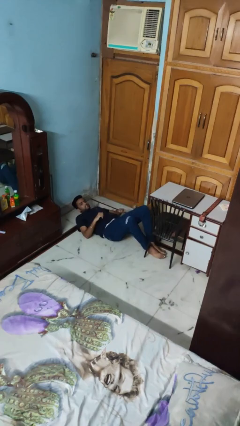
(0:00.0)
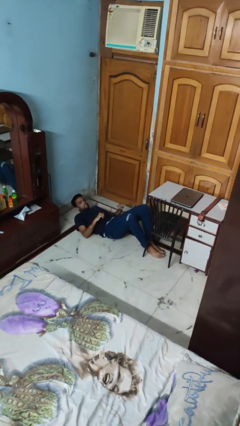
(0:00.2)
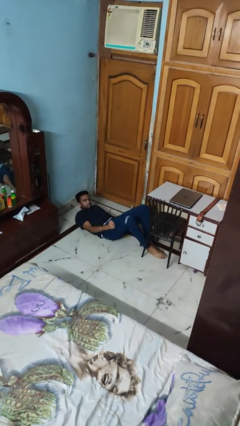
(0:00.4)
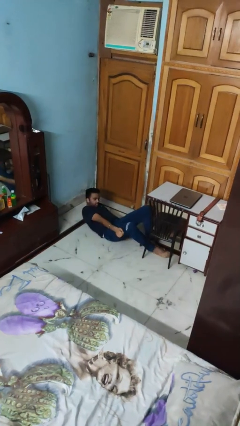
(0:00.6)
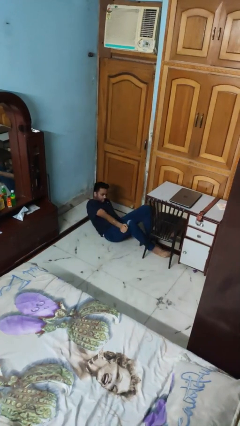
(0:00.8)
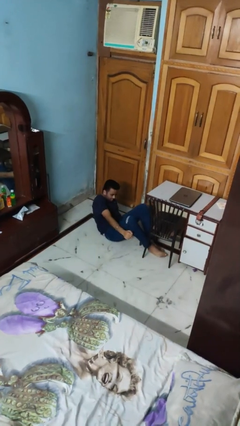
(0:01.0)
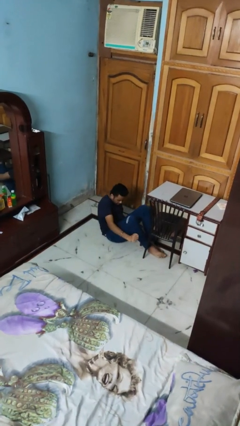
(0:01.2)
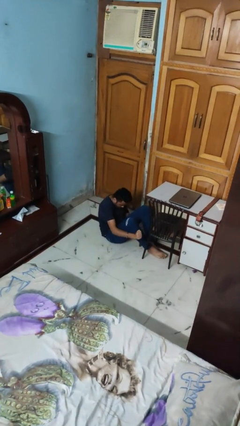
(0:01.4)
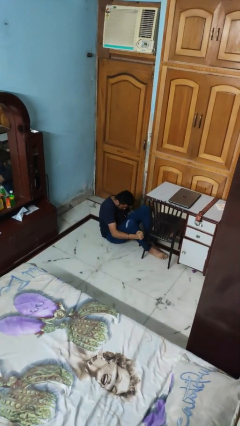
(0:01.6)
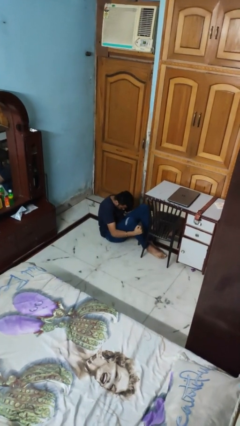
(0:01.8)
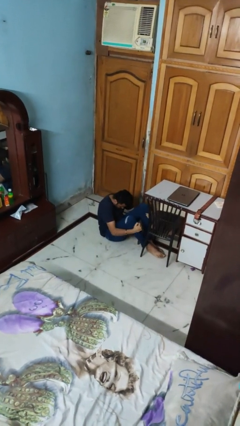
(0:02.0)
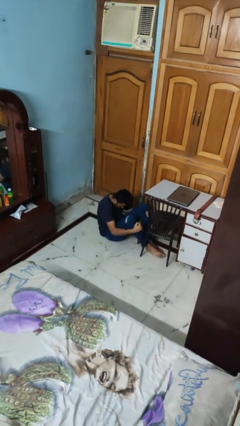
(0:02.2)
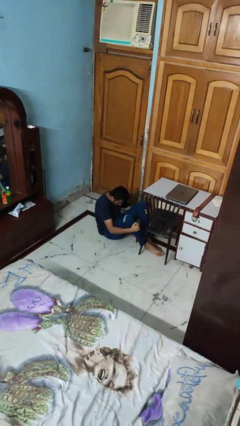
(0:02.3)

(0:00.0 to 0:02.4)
person exercises with situp

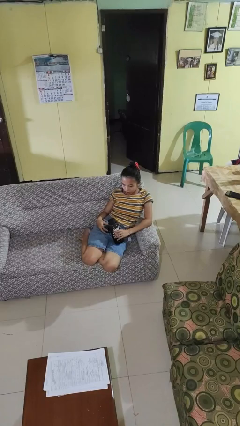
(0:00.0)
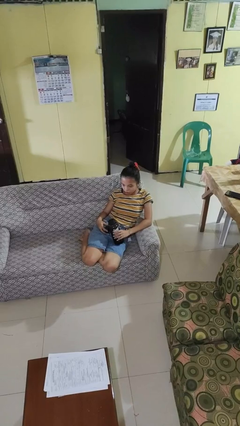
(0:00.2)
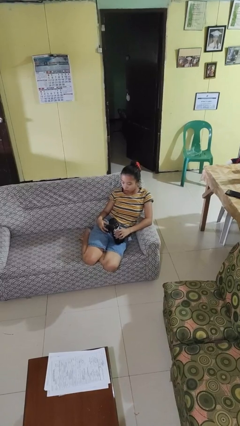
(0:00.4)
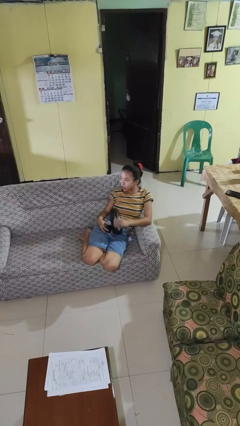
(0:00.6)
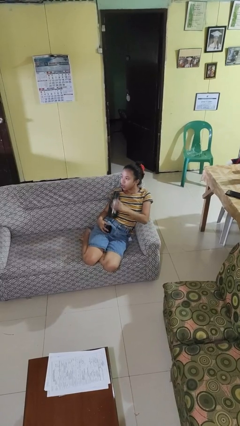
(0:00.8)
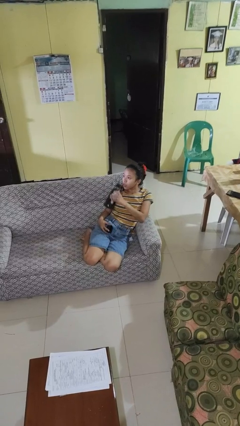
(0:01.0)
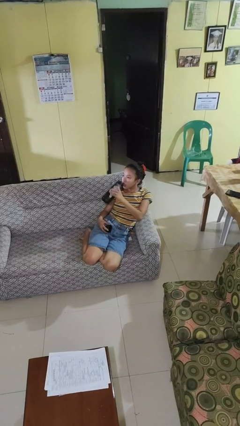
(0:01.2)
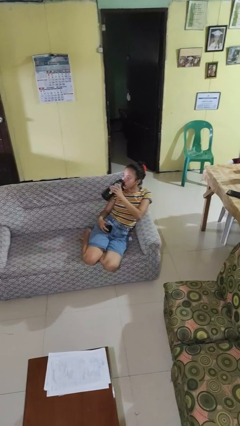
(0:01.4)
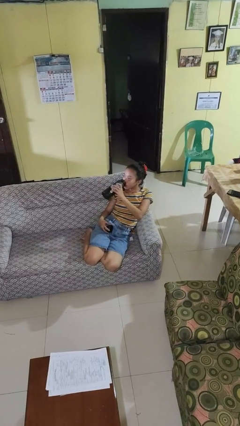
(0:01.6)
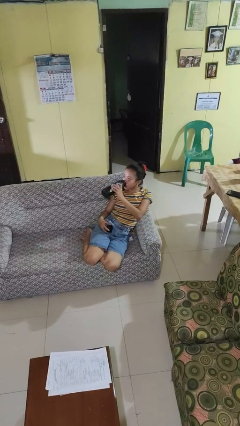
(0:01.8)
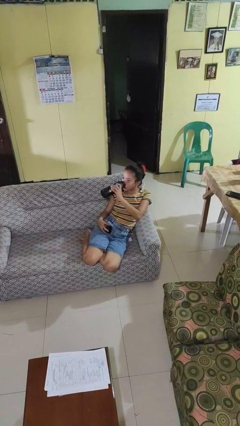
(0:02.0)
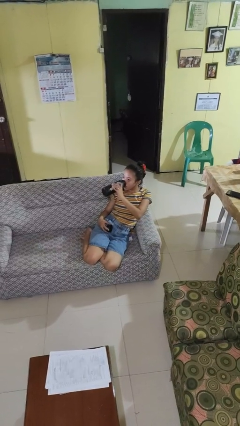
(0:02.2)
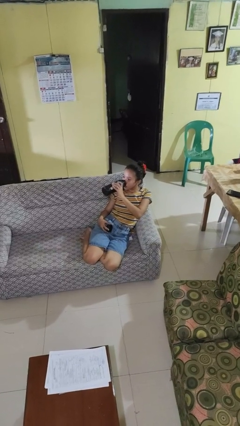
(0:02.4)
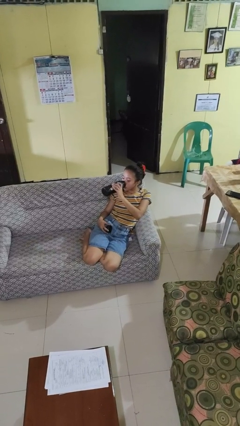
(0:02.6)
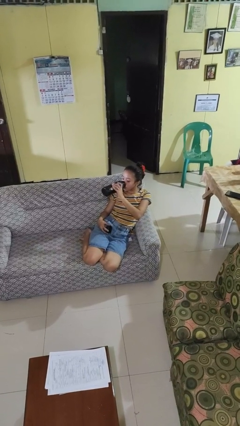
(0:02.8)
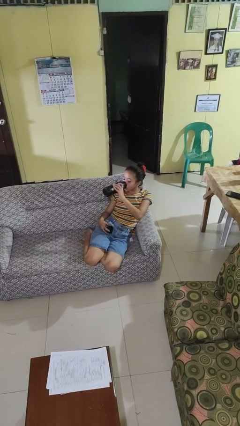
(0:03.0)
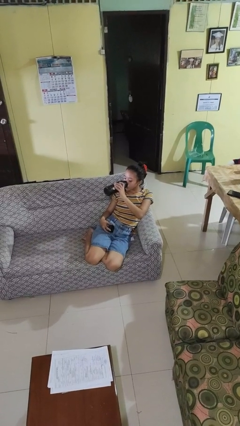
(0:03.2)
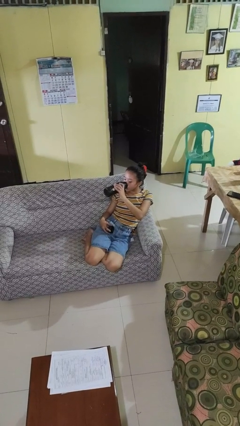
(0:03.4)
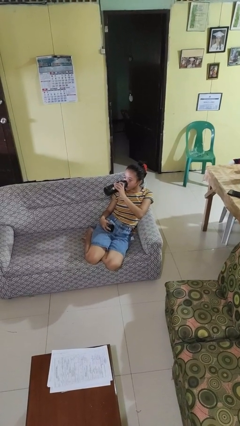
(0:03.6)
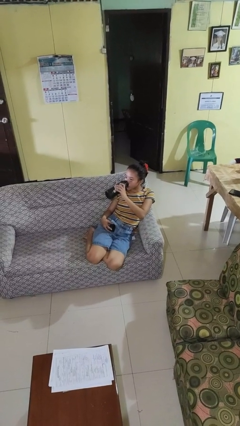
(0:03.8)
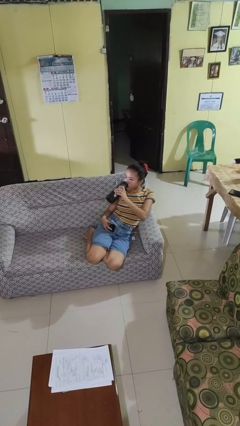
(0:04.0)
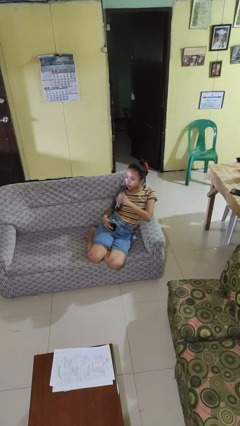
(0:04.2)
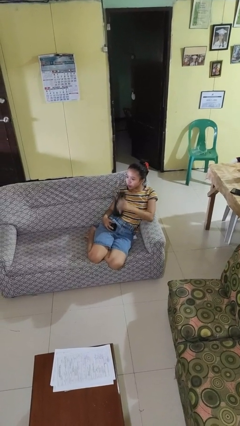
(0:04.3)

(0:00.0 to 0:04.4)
person drinks from bottle

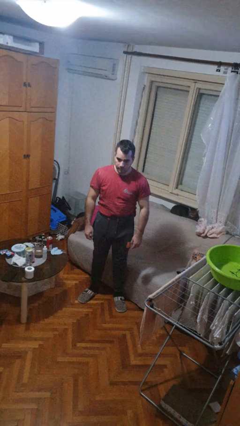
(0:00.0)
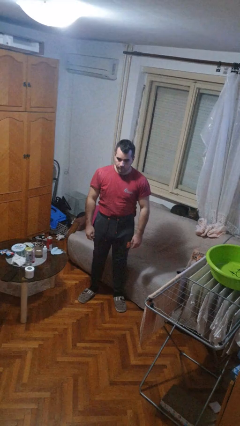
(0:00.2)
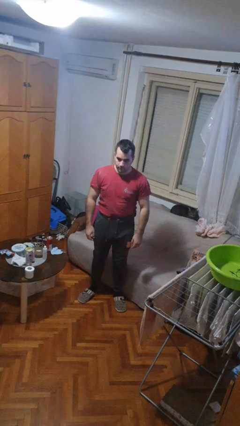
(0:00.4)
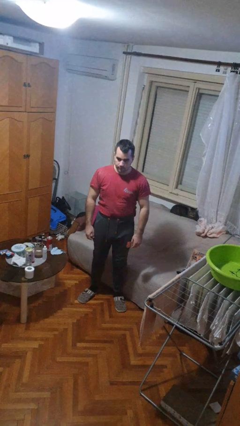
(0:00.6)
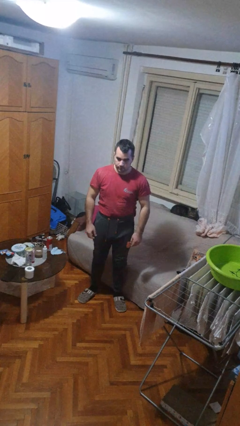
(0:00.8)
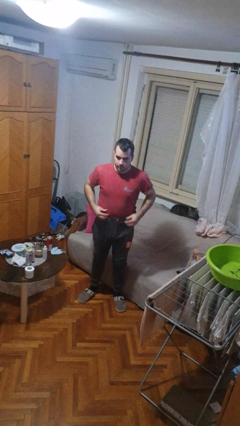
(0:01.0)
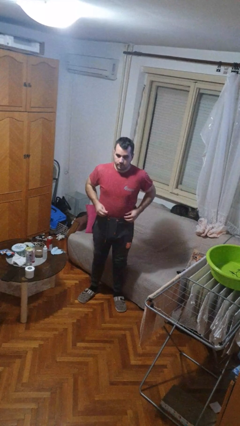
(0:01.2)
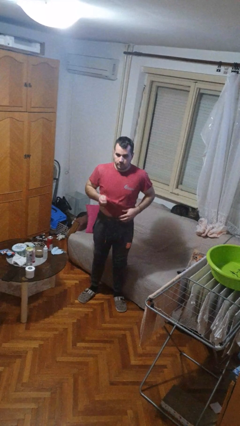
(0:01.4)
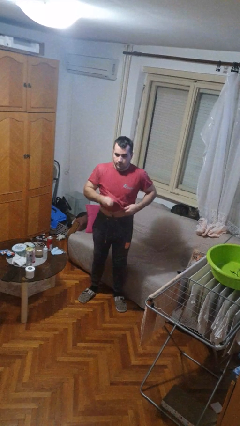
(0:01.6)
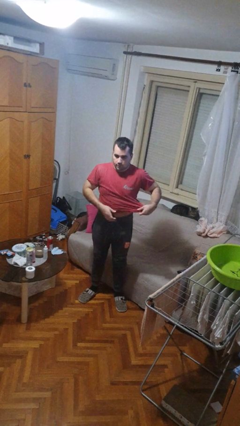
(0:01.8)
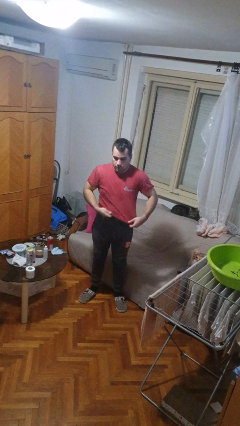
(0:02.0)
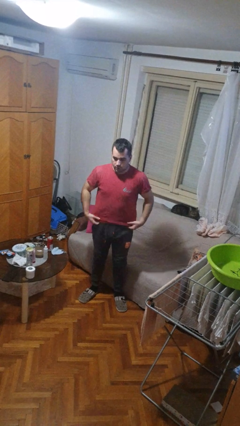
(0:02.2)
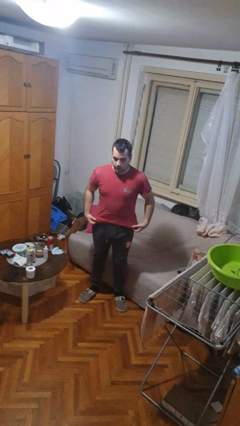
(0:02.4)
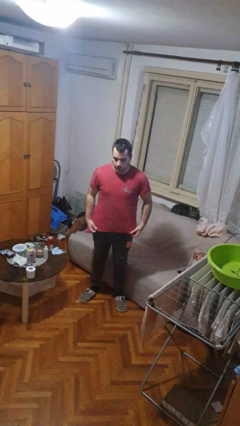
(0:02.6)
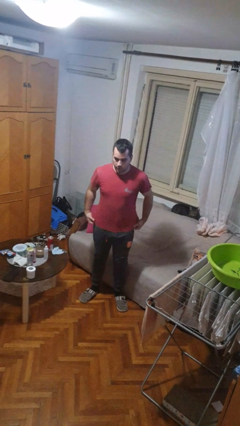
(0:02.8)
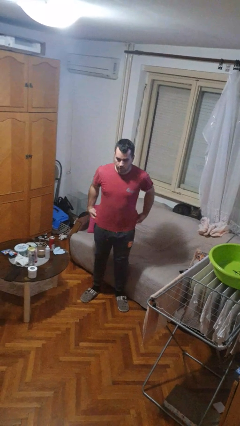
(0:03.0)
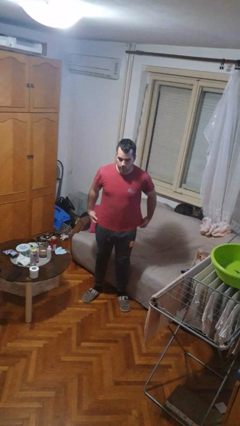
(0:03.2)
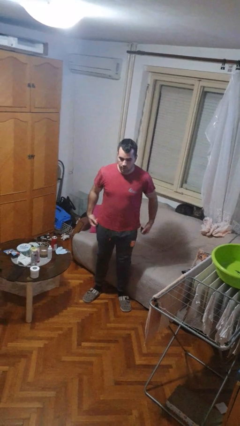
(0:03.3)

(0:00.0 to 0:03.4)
person untucks shirt

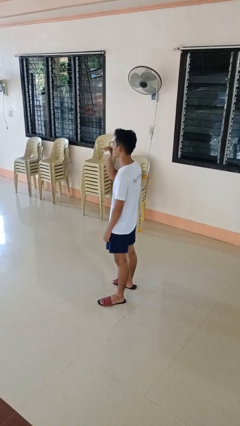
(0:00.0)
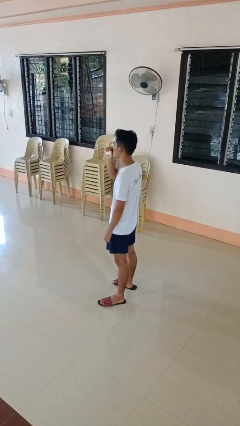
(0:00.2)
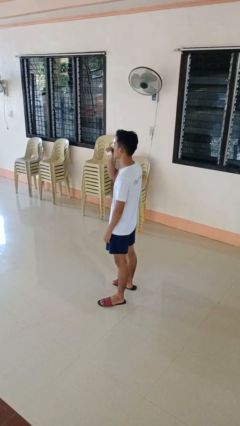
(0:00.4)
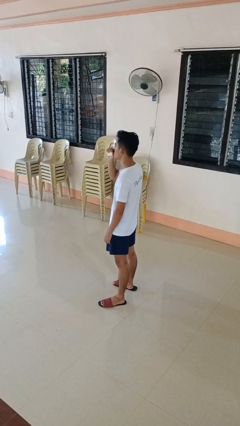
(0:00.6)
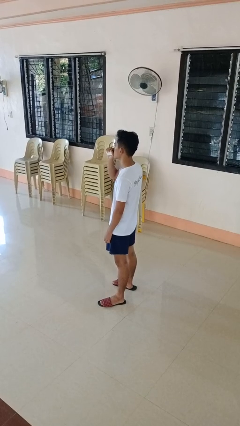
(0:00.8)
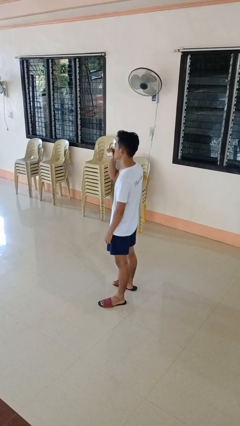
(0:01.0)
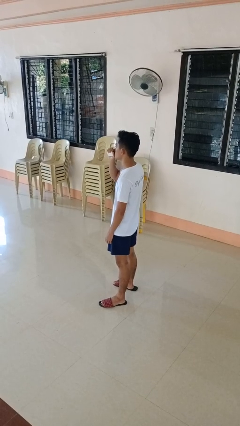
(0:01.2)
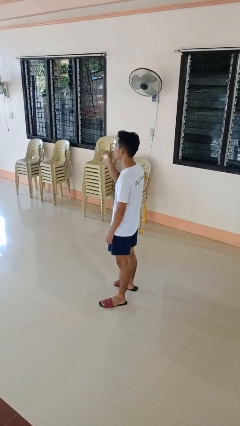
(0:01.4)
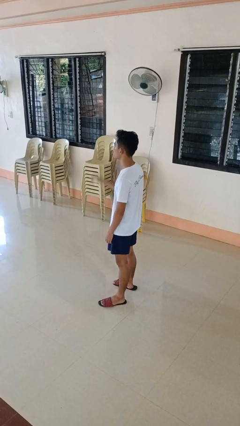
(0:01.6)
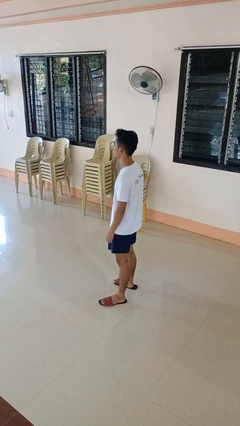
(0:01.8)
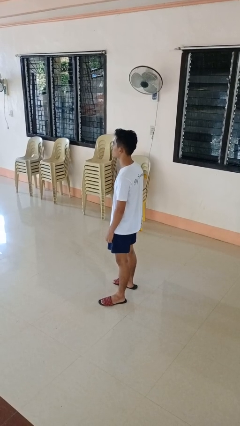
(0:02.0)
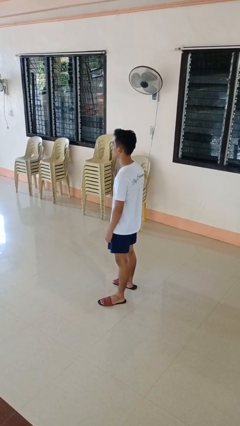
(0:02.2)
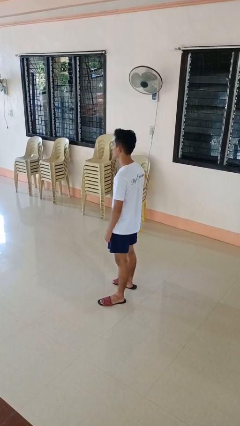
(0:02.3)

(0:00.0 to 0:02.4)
person vapes

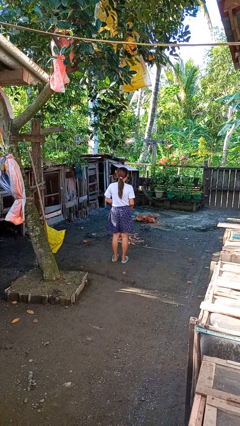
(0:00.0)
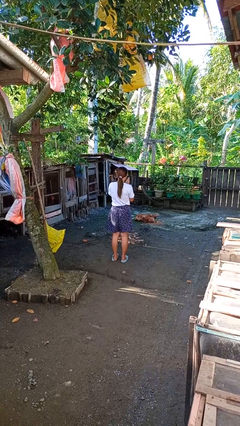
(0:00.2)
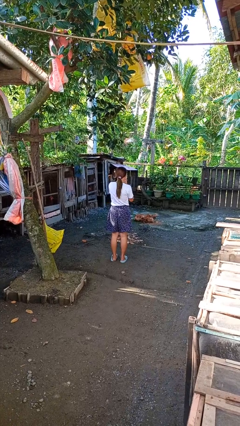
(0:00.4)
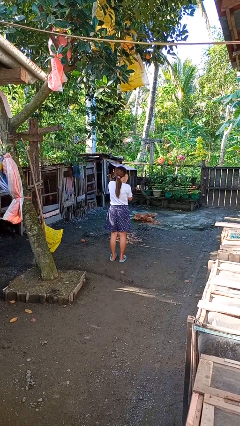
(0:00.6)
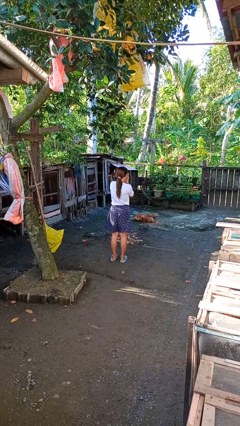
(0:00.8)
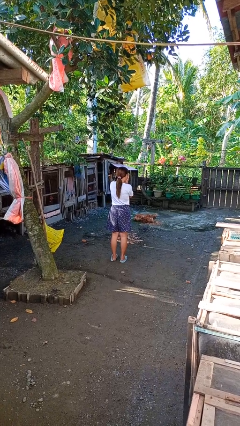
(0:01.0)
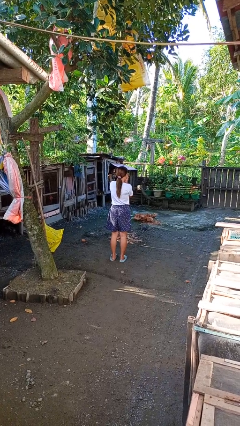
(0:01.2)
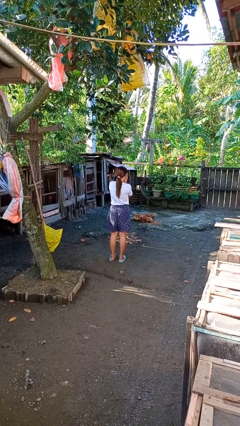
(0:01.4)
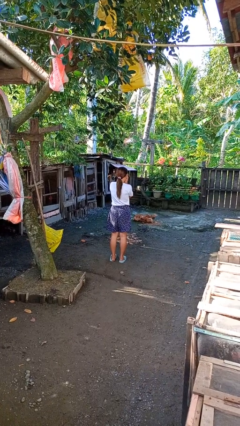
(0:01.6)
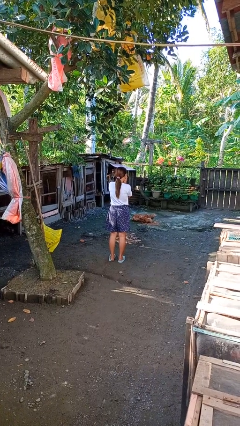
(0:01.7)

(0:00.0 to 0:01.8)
person blows into hands

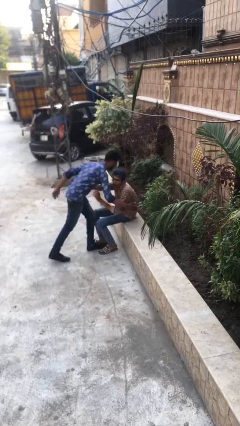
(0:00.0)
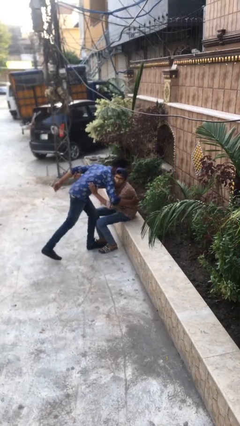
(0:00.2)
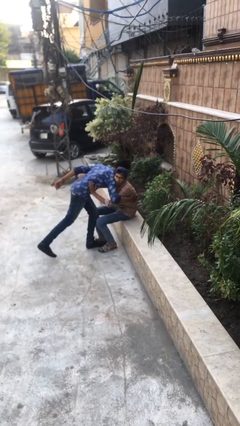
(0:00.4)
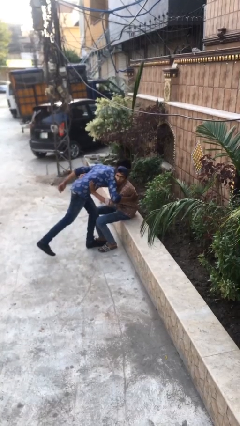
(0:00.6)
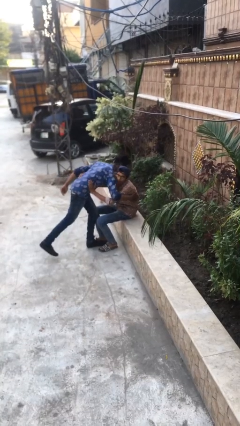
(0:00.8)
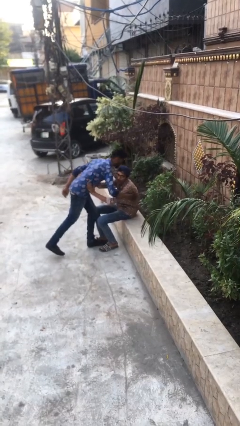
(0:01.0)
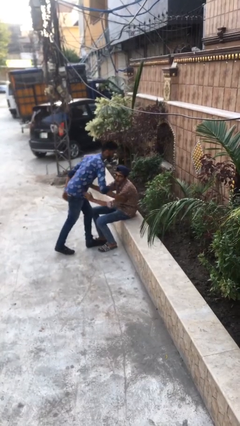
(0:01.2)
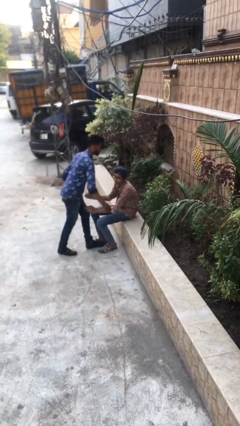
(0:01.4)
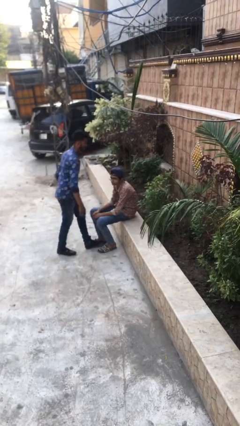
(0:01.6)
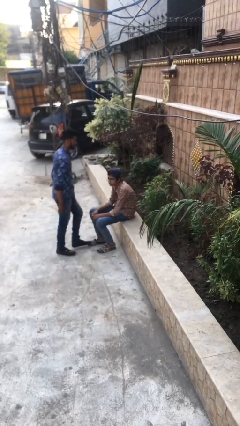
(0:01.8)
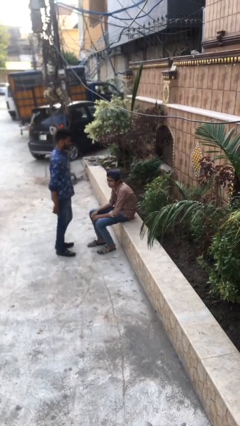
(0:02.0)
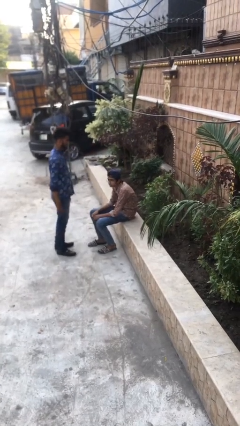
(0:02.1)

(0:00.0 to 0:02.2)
person embraces person

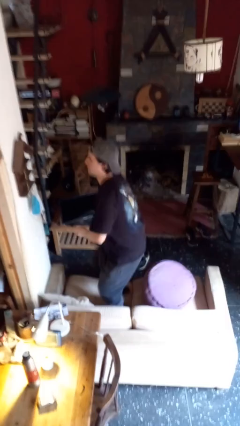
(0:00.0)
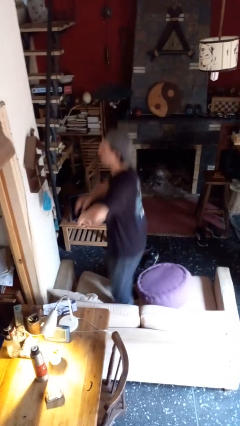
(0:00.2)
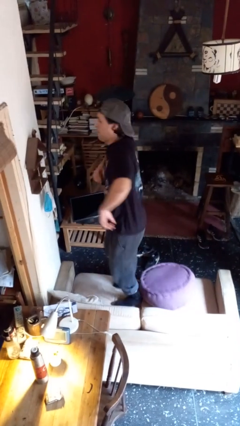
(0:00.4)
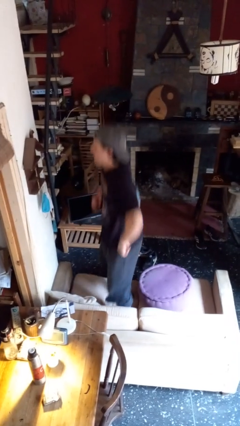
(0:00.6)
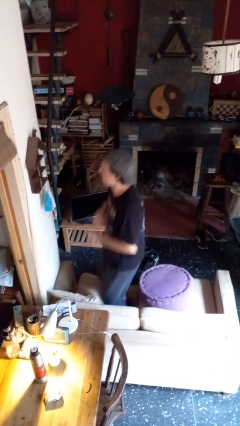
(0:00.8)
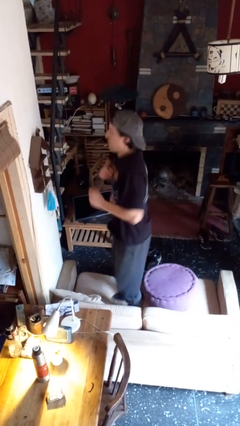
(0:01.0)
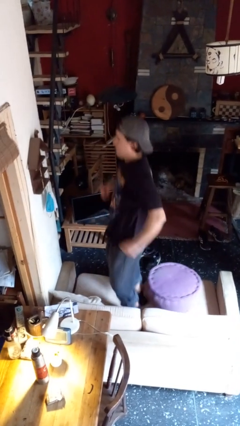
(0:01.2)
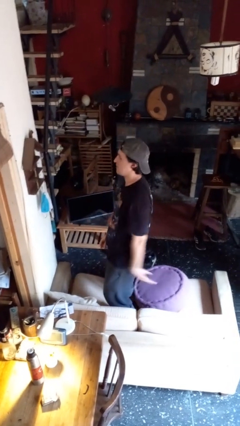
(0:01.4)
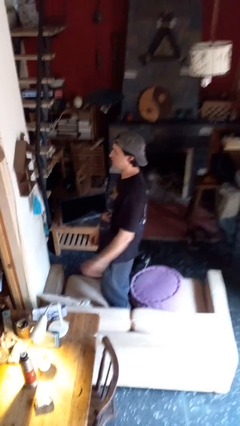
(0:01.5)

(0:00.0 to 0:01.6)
person jumps on couch
